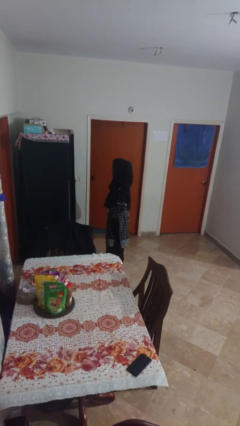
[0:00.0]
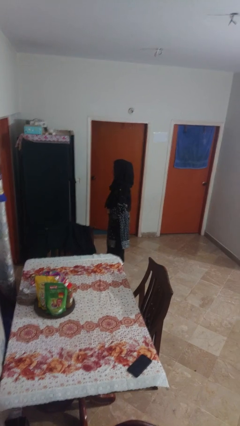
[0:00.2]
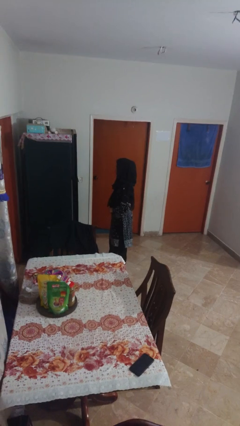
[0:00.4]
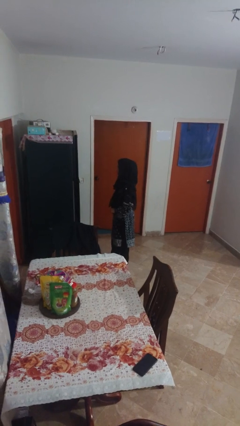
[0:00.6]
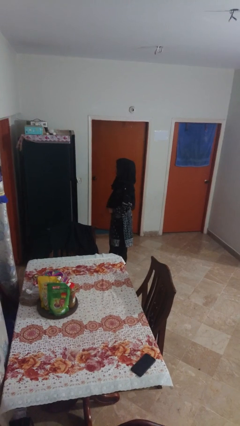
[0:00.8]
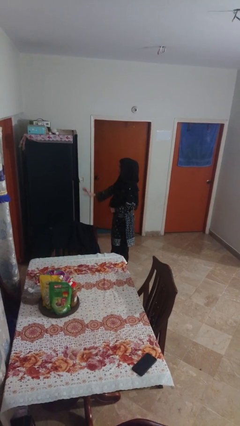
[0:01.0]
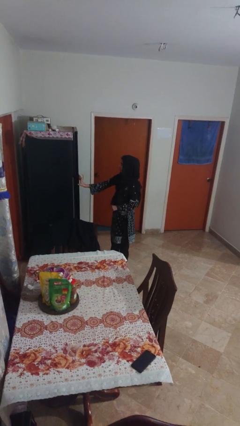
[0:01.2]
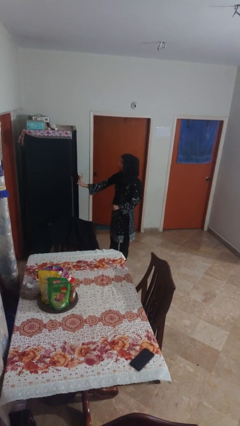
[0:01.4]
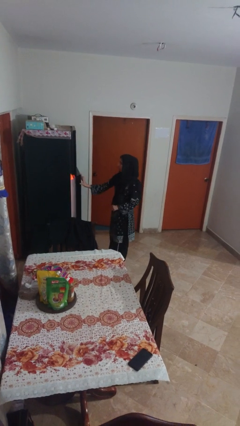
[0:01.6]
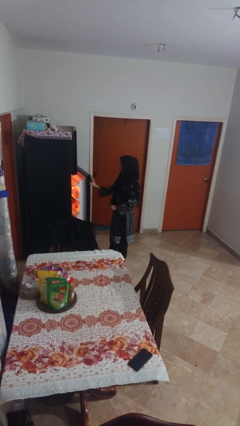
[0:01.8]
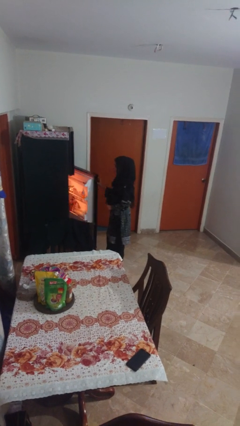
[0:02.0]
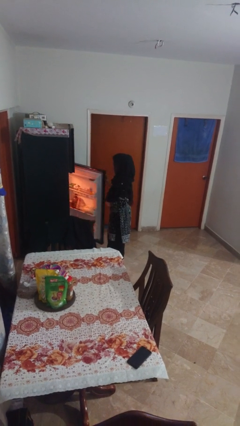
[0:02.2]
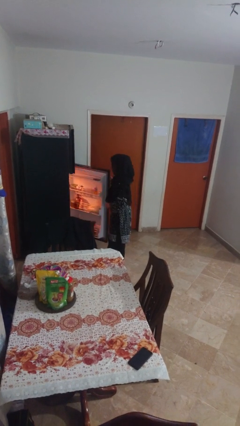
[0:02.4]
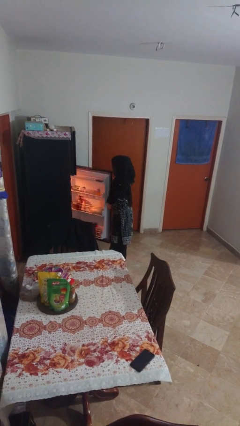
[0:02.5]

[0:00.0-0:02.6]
person opens refrigerator

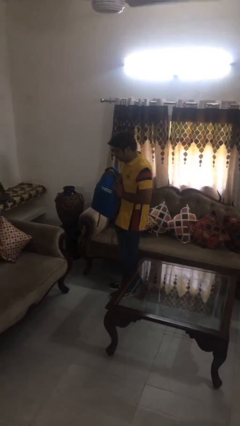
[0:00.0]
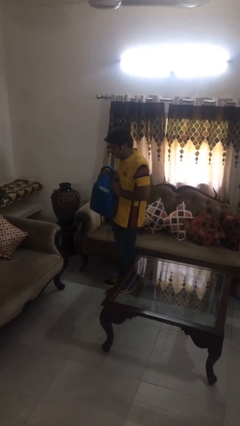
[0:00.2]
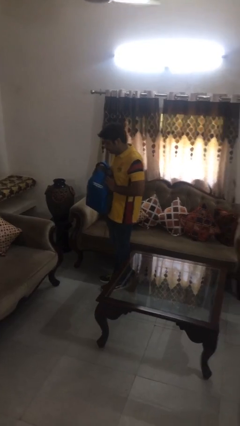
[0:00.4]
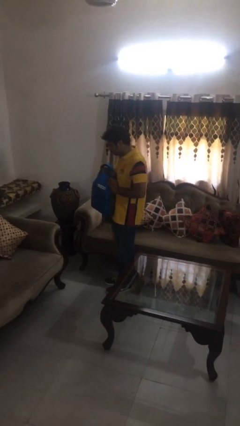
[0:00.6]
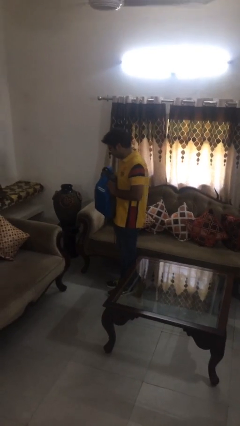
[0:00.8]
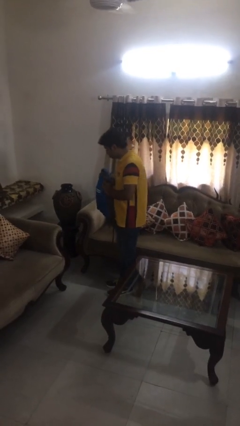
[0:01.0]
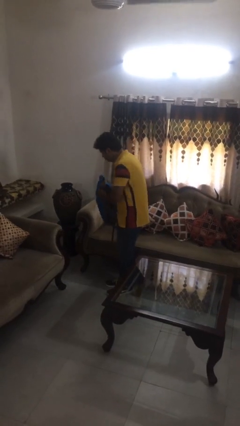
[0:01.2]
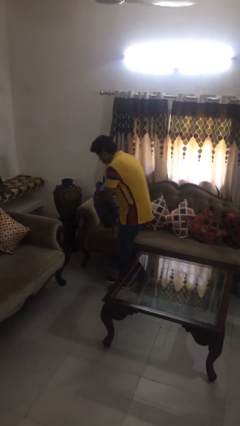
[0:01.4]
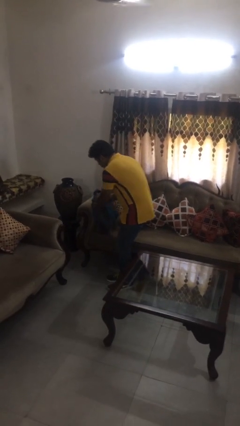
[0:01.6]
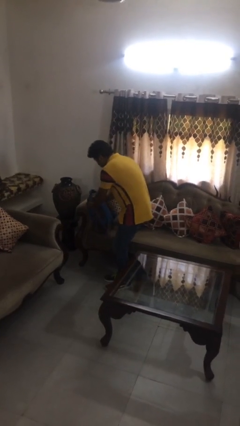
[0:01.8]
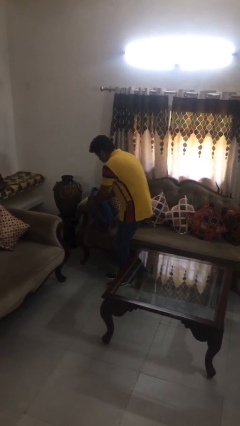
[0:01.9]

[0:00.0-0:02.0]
person puts down object on couch

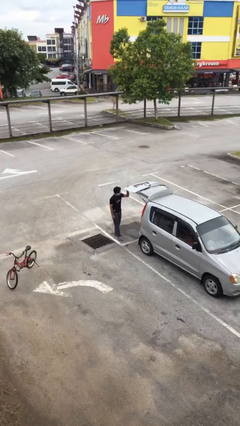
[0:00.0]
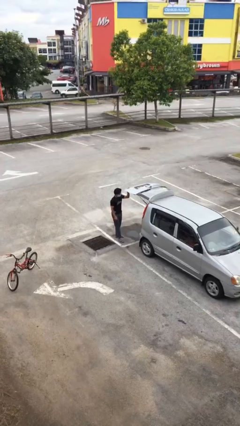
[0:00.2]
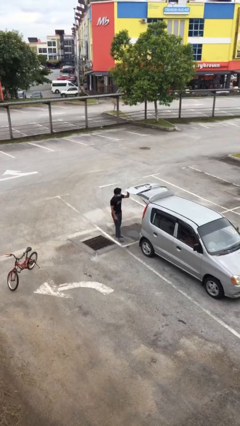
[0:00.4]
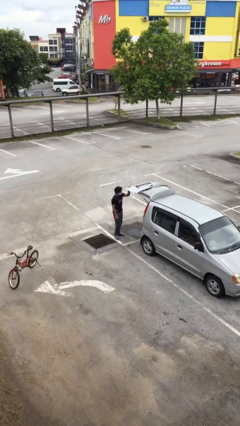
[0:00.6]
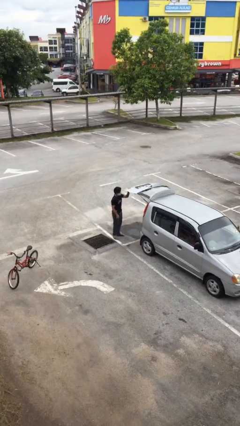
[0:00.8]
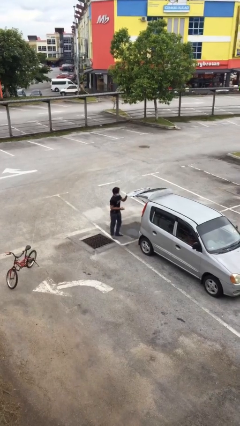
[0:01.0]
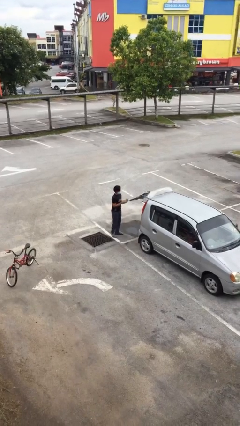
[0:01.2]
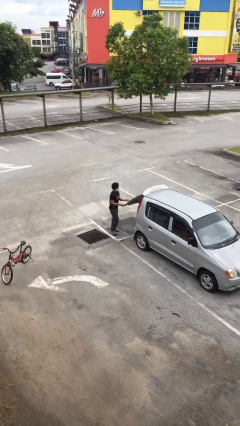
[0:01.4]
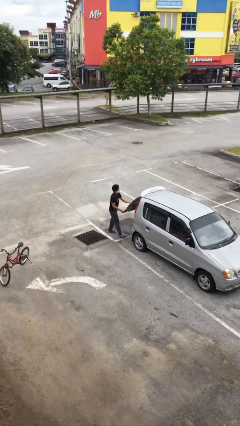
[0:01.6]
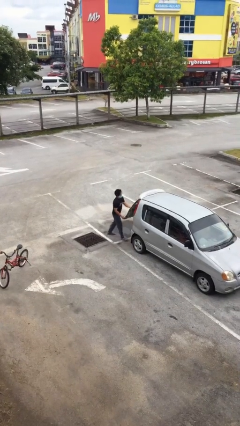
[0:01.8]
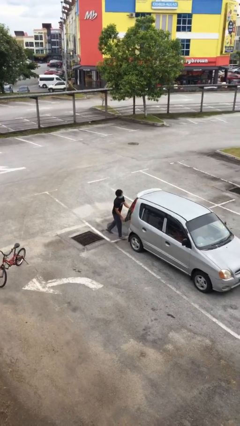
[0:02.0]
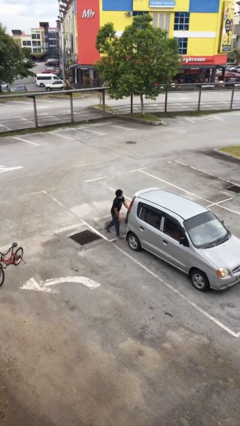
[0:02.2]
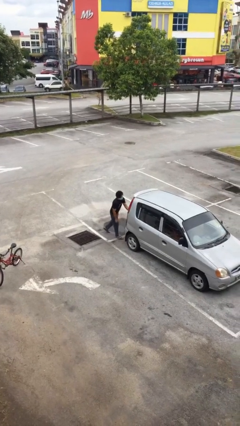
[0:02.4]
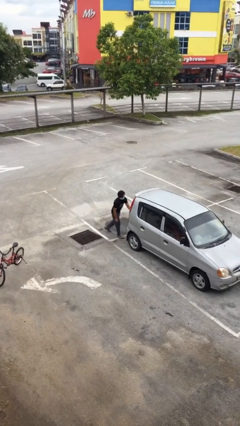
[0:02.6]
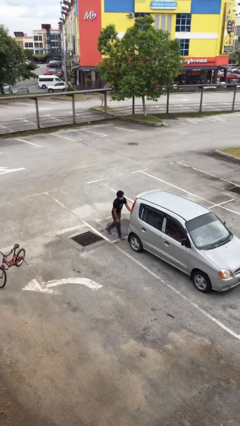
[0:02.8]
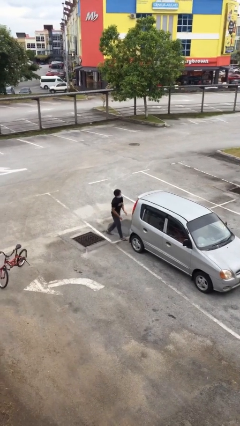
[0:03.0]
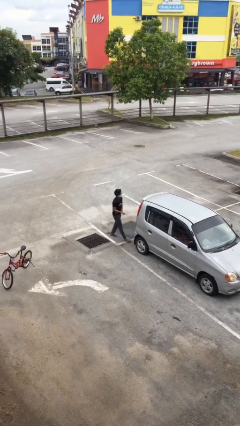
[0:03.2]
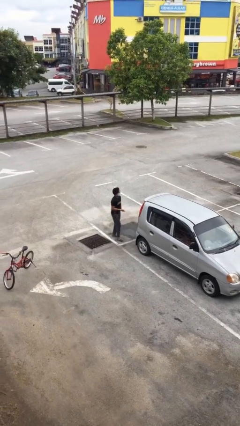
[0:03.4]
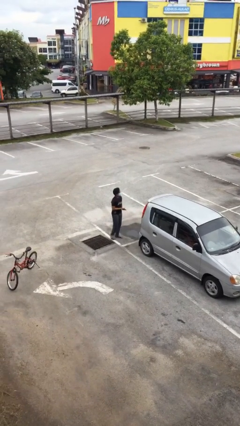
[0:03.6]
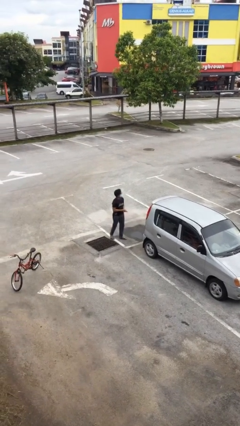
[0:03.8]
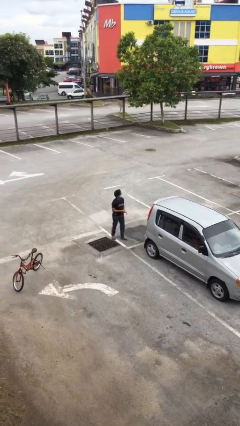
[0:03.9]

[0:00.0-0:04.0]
person closes car trunk

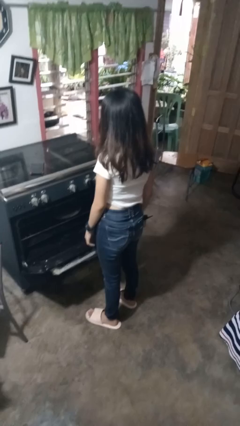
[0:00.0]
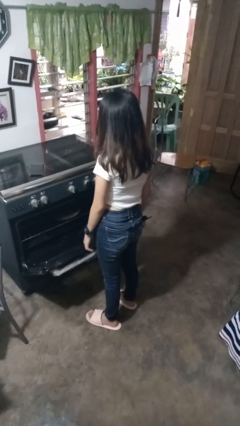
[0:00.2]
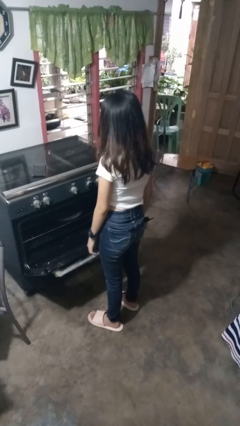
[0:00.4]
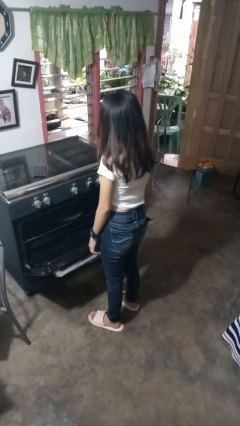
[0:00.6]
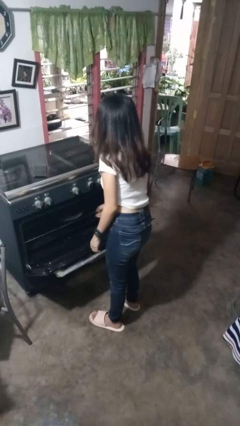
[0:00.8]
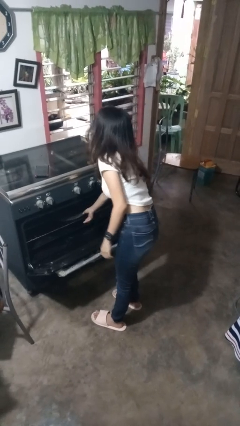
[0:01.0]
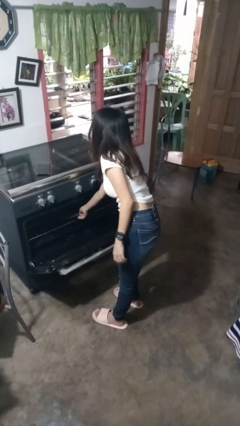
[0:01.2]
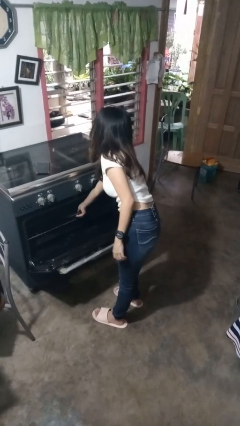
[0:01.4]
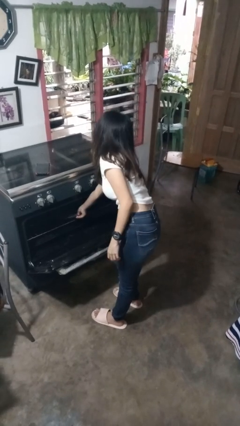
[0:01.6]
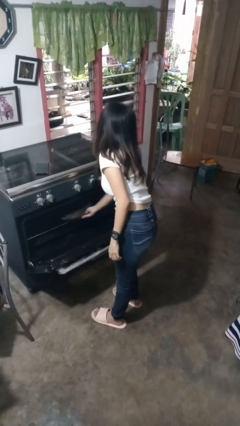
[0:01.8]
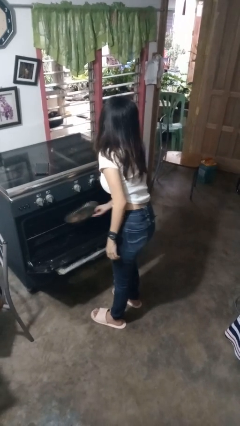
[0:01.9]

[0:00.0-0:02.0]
person takes object from oven

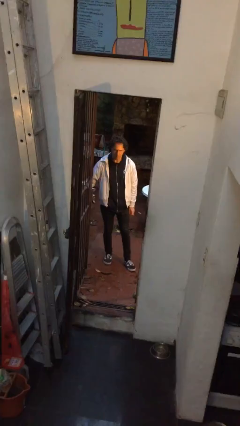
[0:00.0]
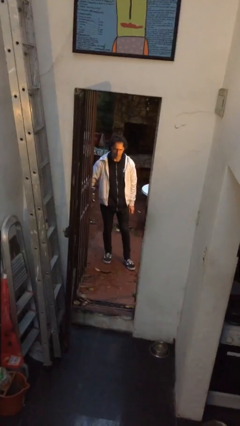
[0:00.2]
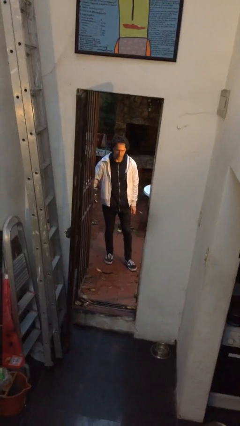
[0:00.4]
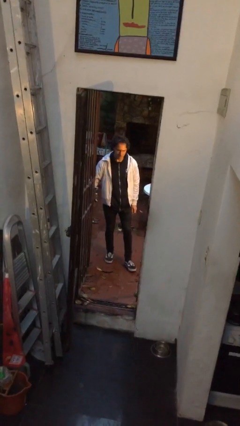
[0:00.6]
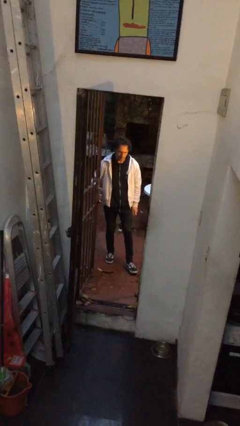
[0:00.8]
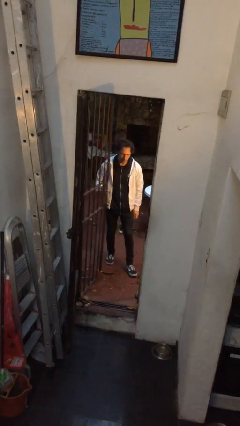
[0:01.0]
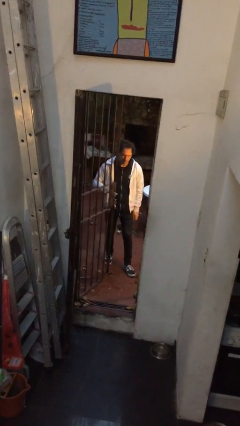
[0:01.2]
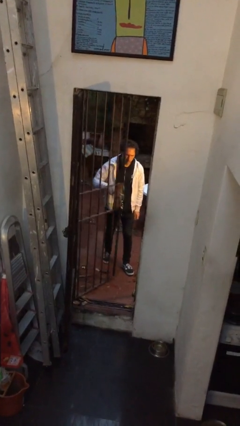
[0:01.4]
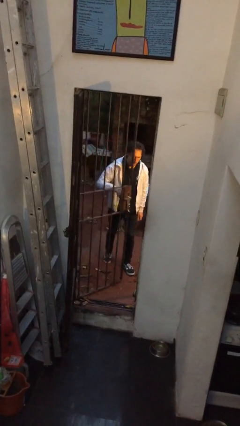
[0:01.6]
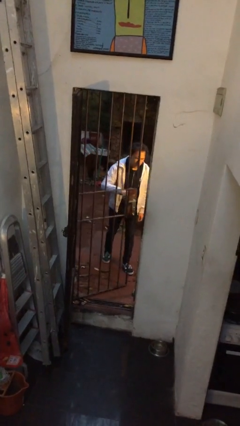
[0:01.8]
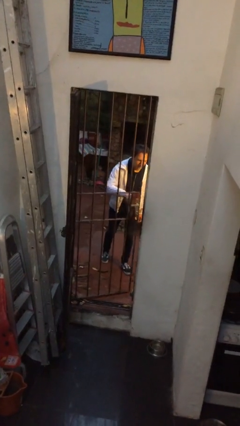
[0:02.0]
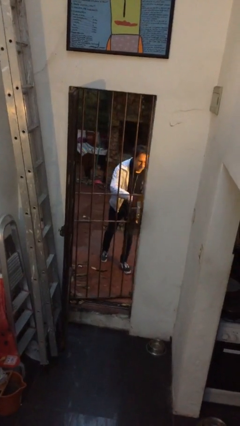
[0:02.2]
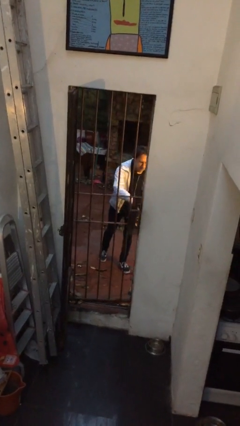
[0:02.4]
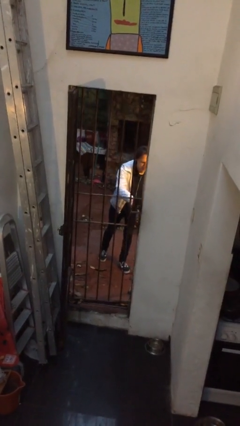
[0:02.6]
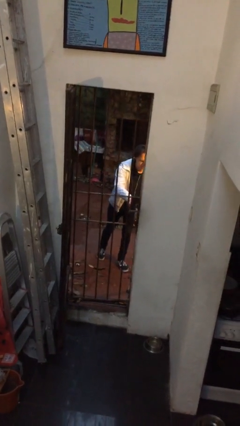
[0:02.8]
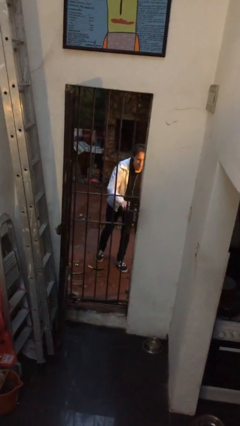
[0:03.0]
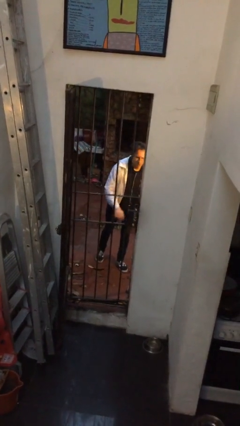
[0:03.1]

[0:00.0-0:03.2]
person closes gate

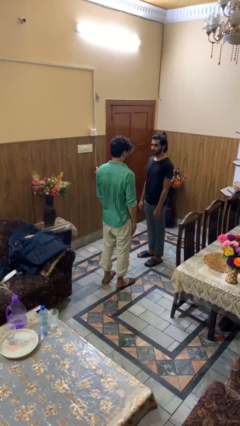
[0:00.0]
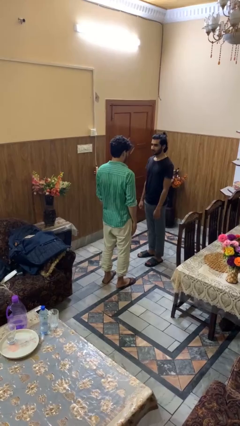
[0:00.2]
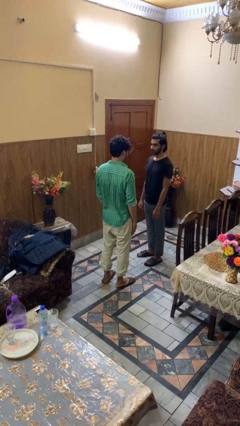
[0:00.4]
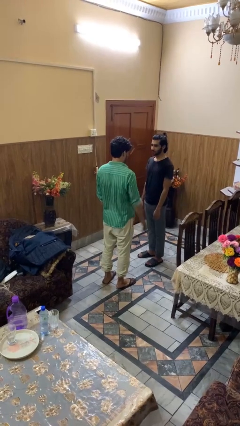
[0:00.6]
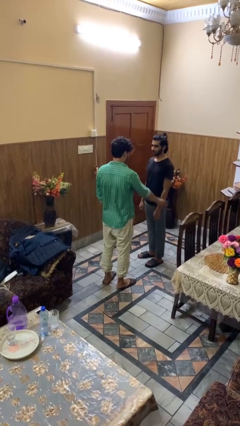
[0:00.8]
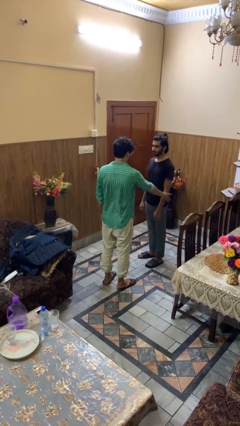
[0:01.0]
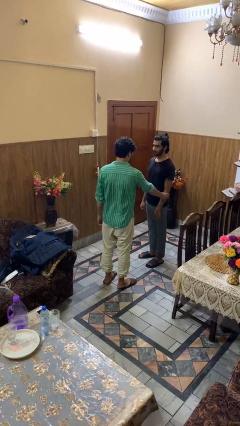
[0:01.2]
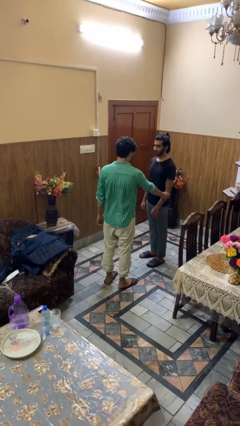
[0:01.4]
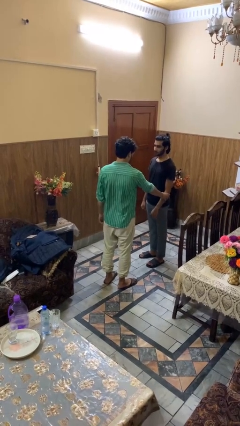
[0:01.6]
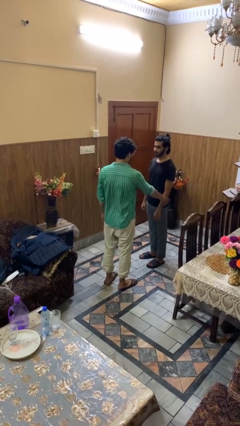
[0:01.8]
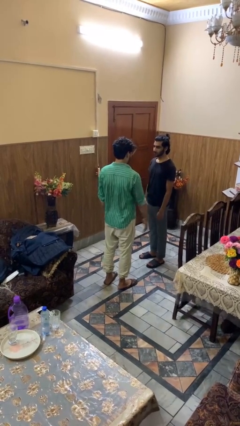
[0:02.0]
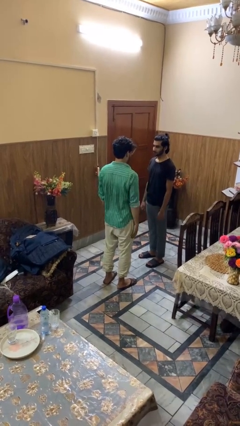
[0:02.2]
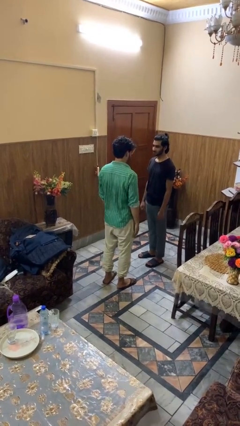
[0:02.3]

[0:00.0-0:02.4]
person grabs person by forearm

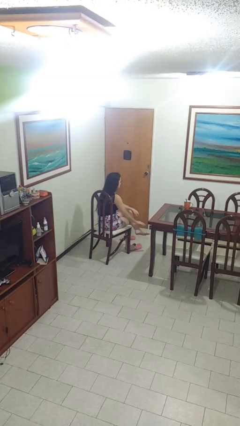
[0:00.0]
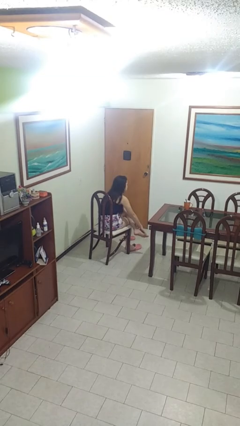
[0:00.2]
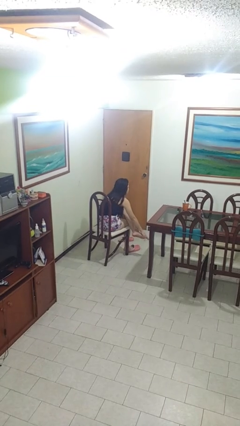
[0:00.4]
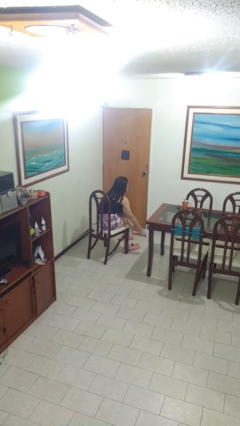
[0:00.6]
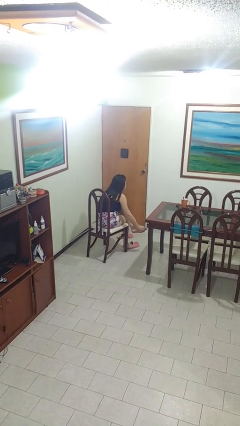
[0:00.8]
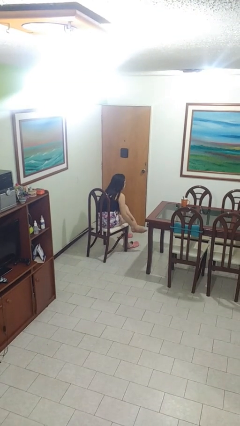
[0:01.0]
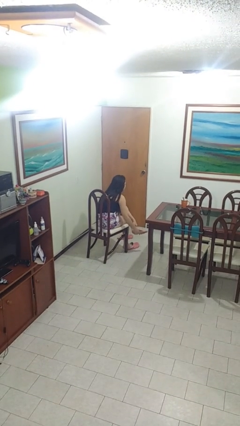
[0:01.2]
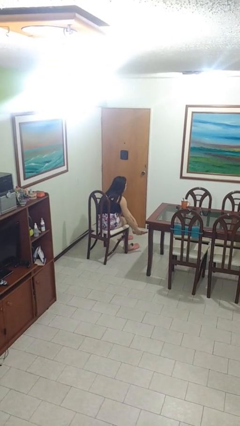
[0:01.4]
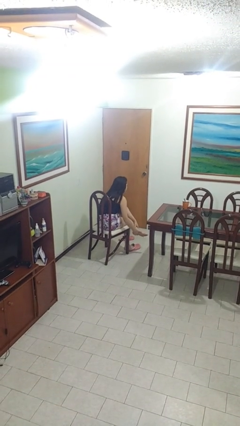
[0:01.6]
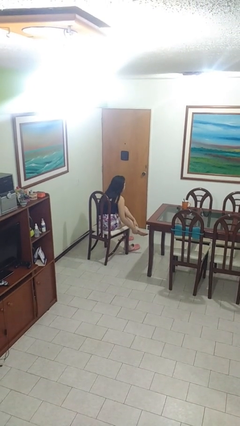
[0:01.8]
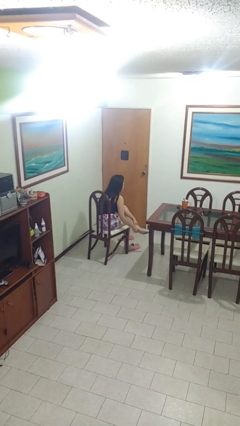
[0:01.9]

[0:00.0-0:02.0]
person rubs foot
